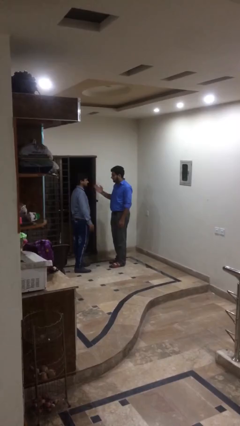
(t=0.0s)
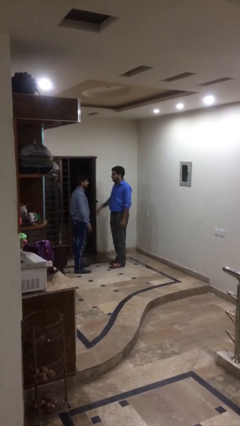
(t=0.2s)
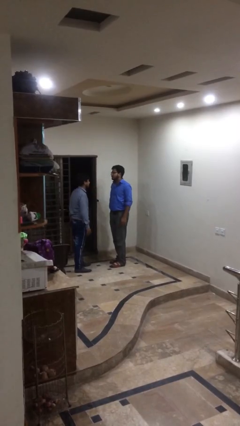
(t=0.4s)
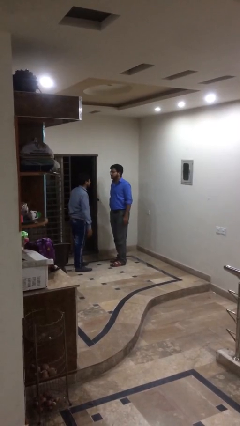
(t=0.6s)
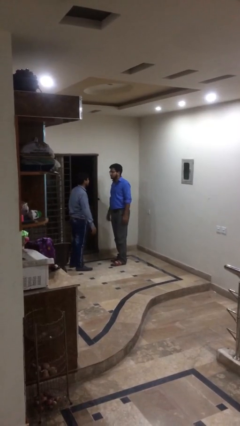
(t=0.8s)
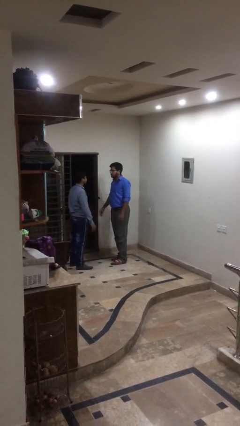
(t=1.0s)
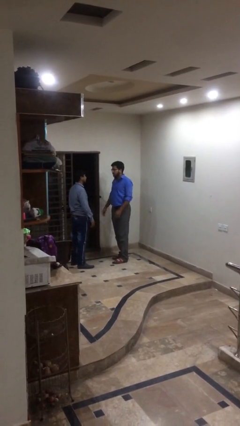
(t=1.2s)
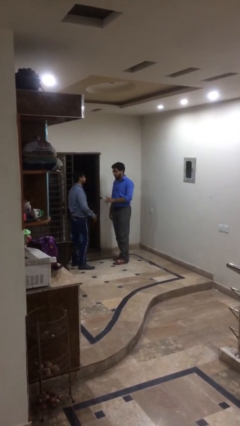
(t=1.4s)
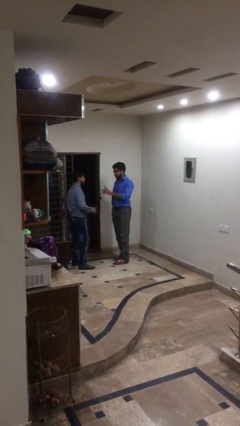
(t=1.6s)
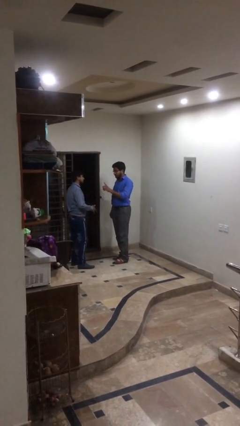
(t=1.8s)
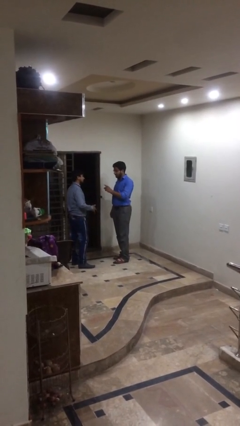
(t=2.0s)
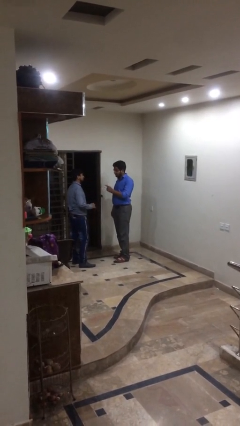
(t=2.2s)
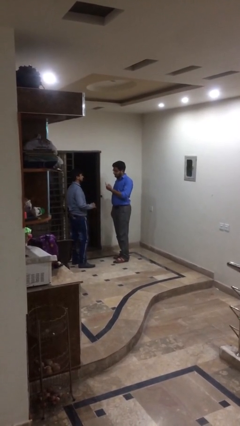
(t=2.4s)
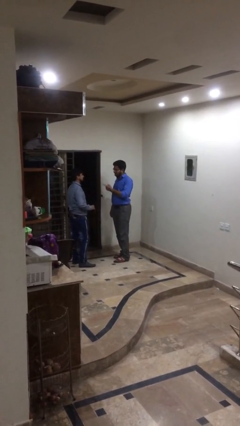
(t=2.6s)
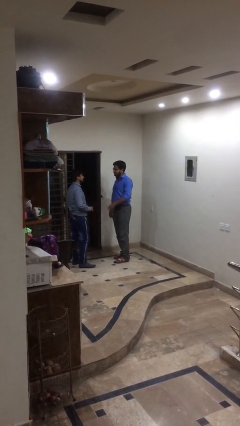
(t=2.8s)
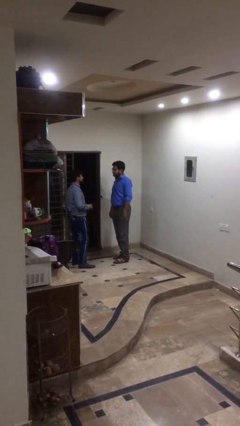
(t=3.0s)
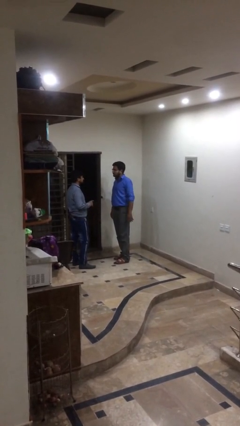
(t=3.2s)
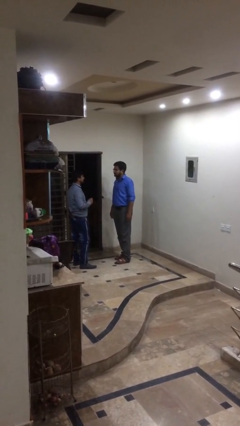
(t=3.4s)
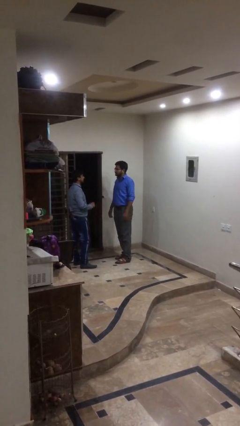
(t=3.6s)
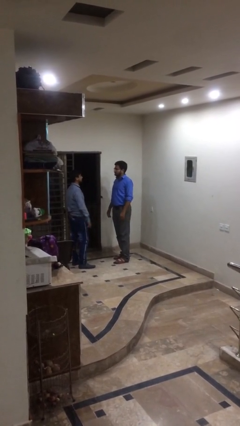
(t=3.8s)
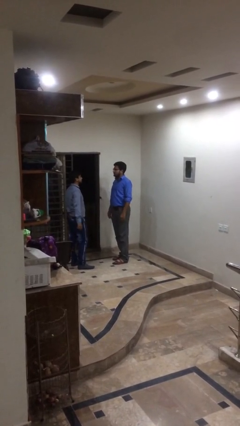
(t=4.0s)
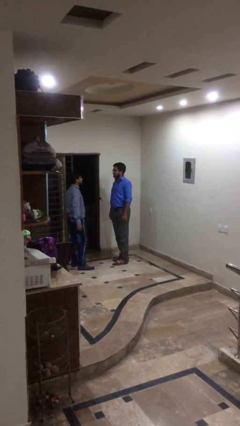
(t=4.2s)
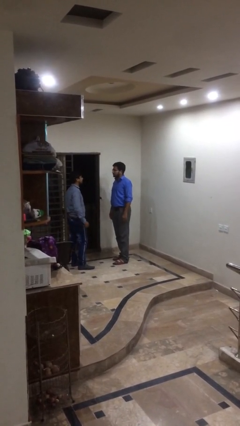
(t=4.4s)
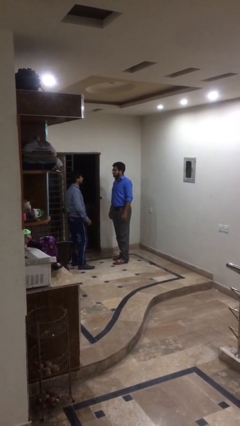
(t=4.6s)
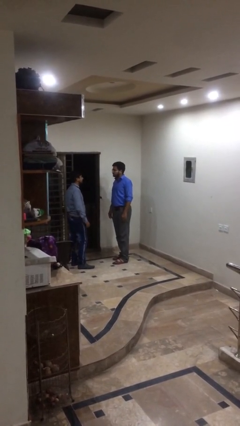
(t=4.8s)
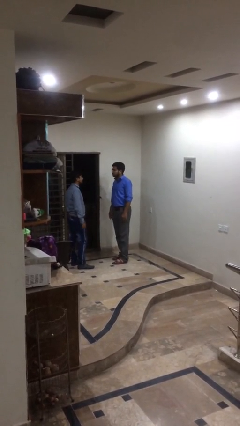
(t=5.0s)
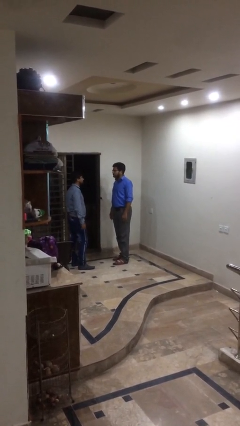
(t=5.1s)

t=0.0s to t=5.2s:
person talks to person

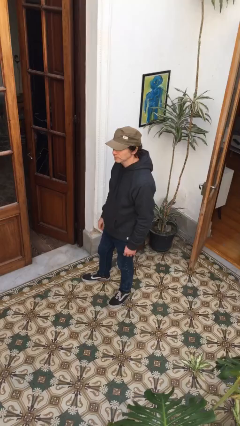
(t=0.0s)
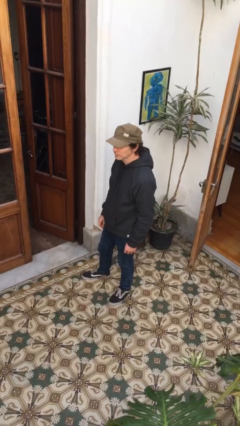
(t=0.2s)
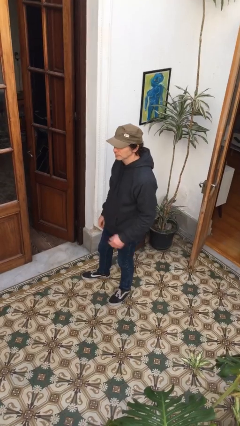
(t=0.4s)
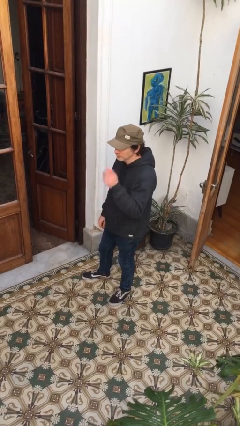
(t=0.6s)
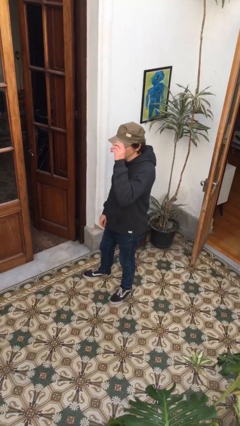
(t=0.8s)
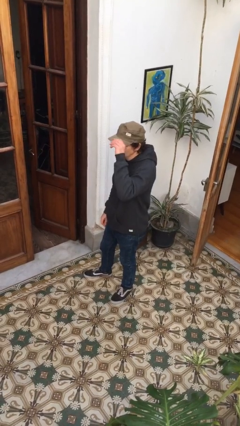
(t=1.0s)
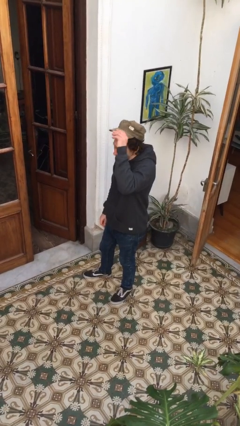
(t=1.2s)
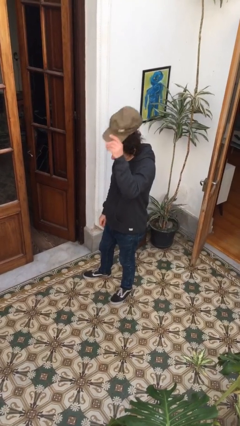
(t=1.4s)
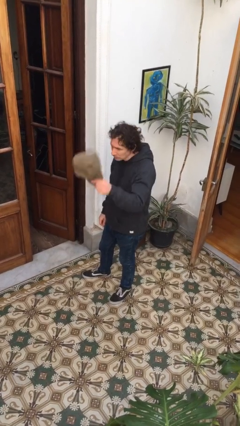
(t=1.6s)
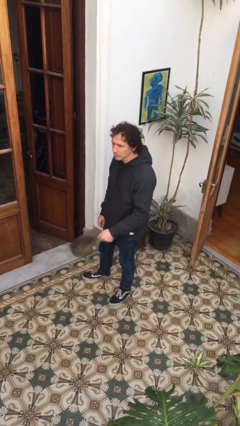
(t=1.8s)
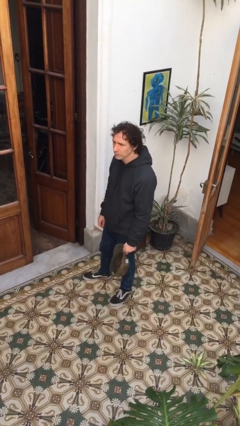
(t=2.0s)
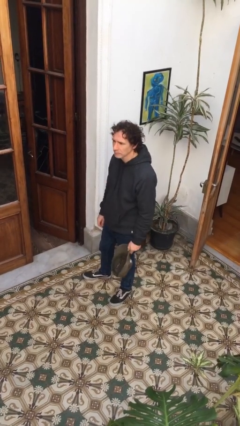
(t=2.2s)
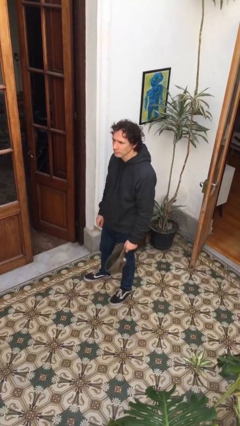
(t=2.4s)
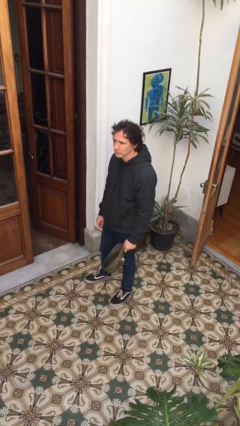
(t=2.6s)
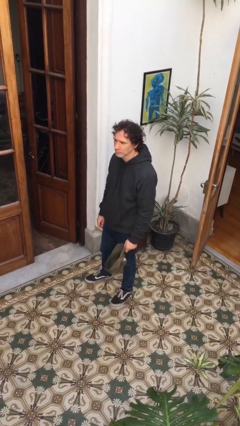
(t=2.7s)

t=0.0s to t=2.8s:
person takes off hat

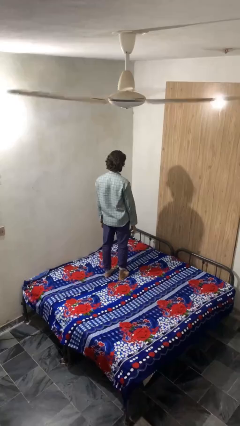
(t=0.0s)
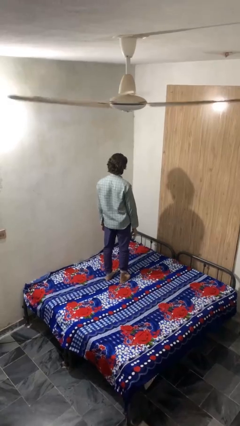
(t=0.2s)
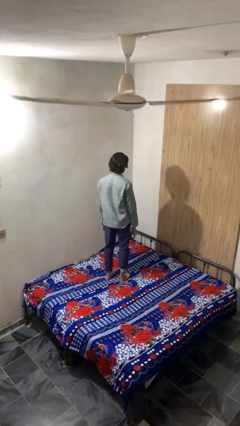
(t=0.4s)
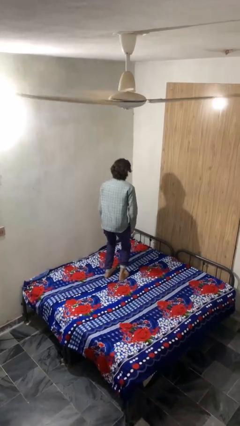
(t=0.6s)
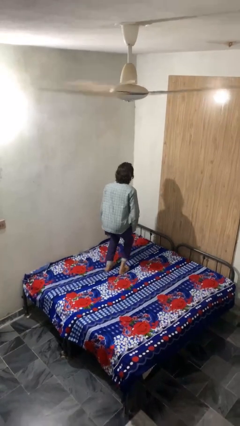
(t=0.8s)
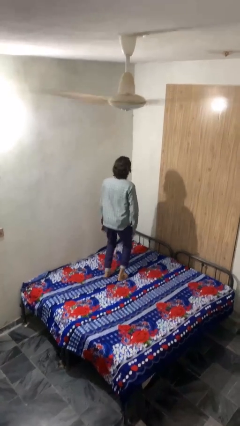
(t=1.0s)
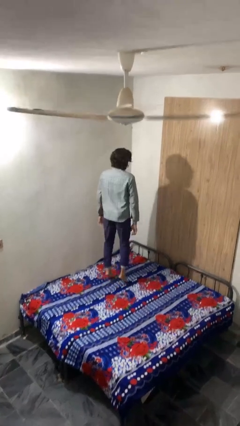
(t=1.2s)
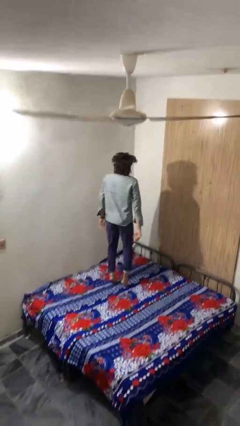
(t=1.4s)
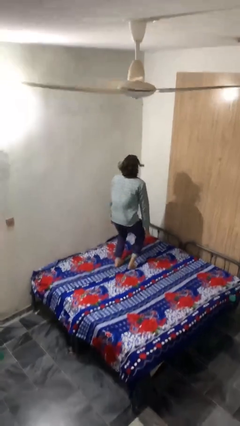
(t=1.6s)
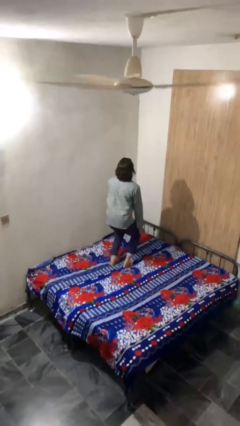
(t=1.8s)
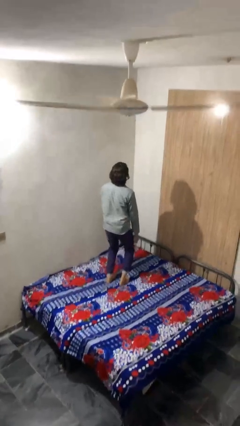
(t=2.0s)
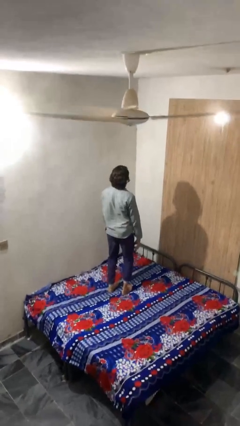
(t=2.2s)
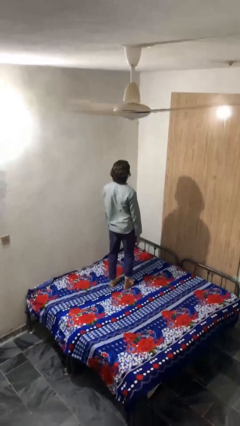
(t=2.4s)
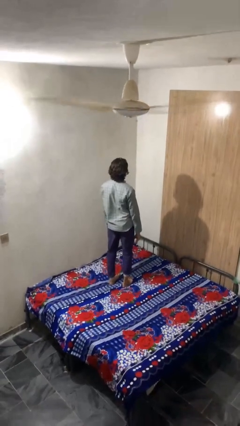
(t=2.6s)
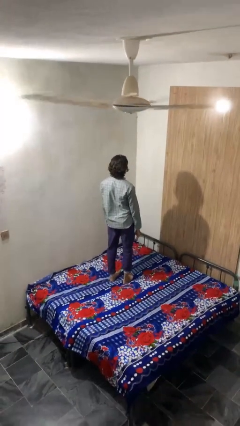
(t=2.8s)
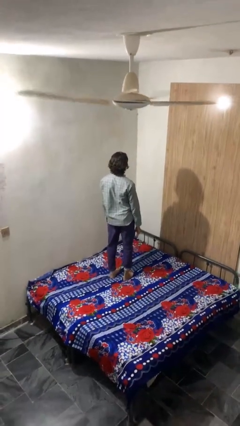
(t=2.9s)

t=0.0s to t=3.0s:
person jumps on bed

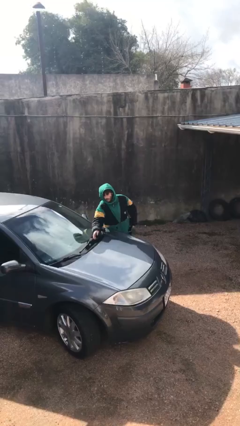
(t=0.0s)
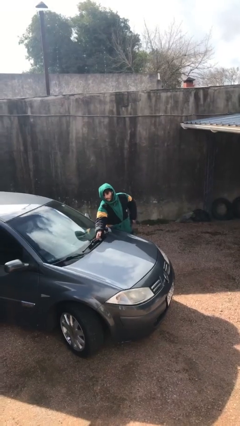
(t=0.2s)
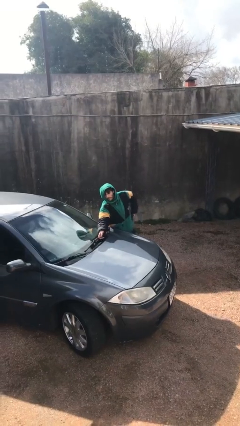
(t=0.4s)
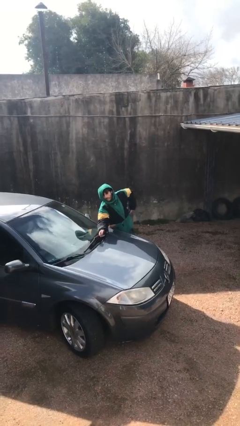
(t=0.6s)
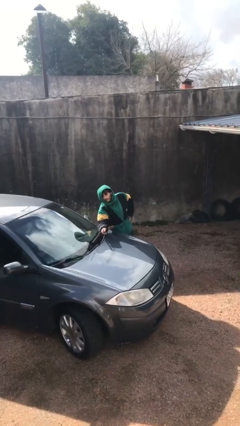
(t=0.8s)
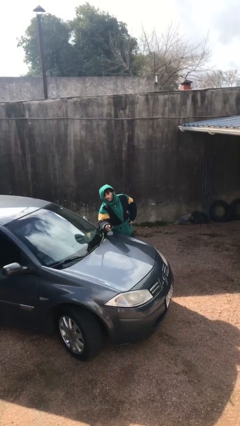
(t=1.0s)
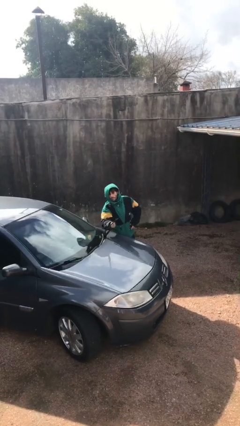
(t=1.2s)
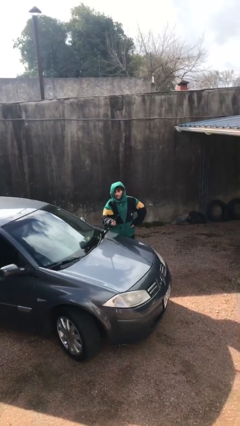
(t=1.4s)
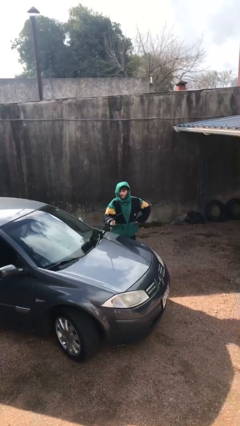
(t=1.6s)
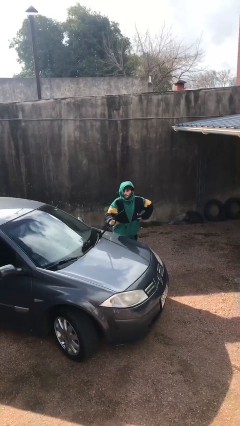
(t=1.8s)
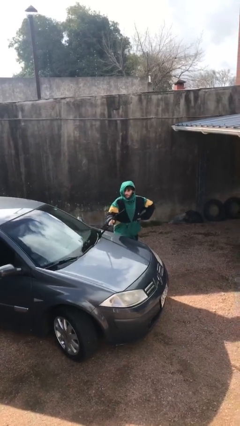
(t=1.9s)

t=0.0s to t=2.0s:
person flips up car wipers

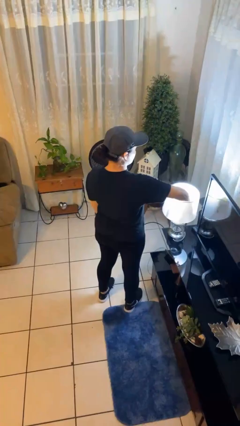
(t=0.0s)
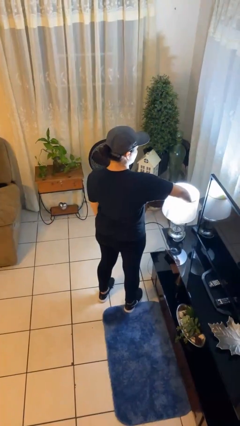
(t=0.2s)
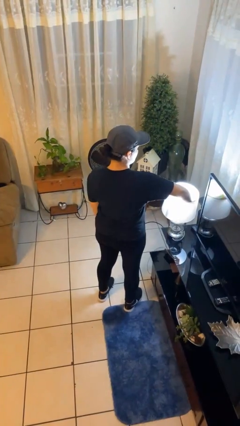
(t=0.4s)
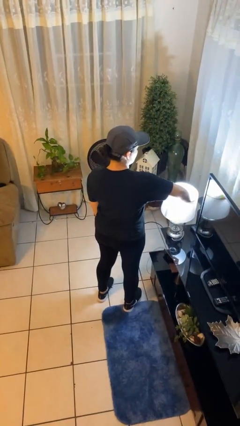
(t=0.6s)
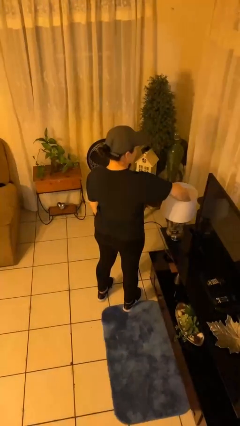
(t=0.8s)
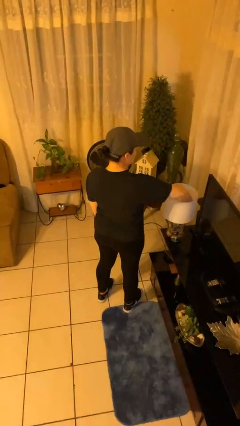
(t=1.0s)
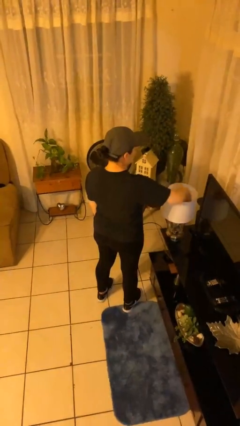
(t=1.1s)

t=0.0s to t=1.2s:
person turns off lamp

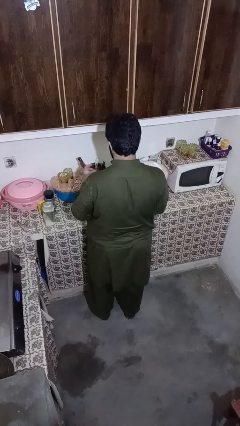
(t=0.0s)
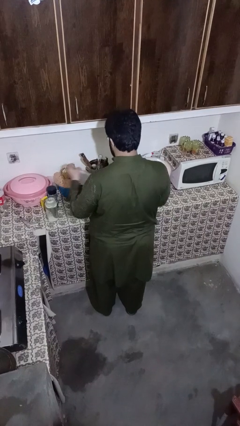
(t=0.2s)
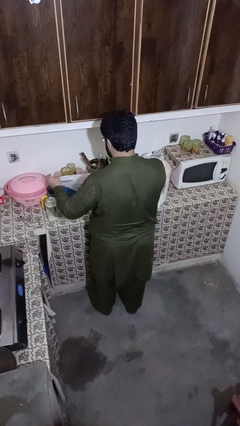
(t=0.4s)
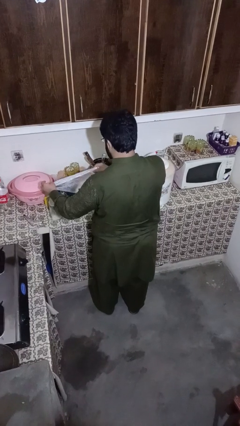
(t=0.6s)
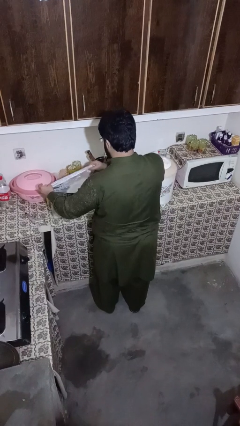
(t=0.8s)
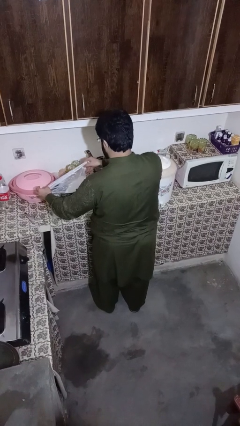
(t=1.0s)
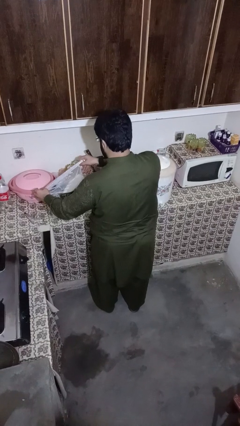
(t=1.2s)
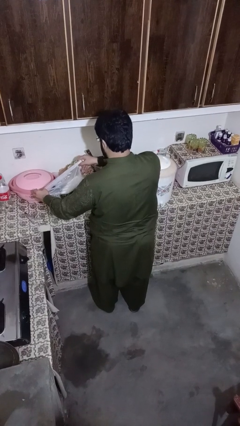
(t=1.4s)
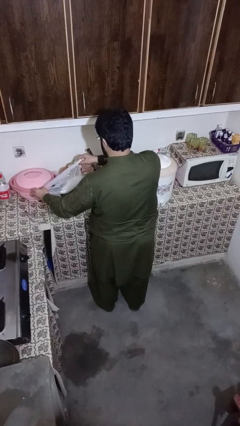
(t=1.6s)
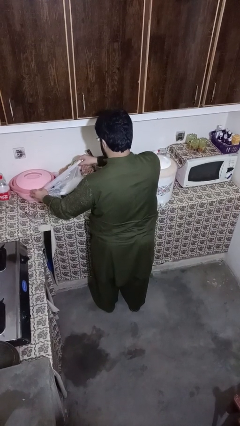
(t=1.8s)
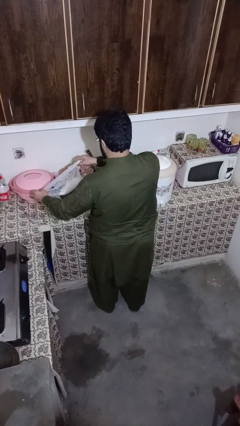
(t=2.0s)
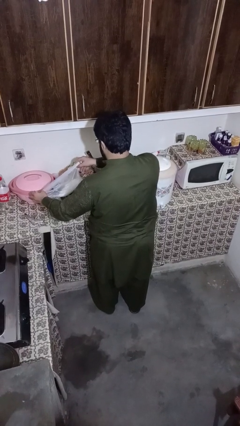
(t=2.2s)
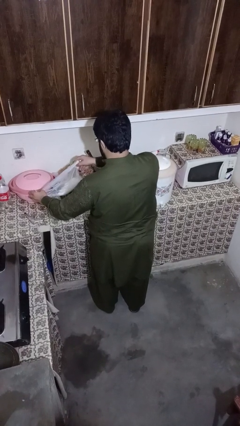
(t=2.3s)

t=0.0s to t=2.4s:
person pours into bowl

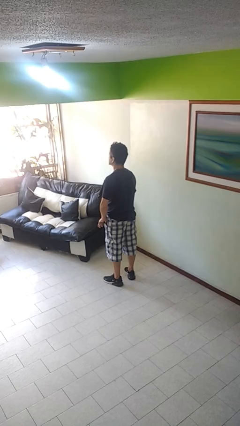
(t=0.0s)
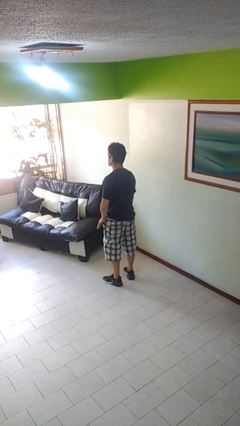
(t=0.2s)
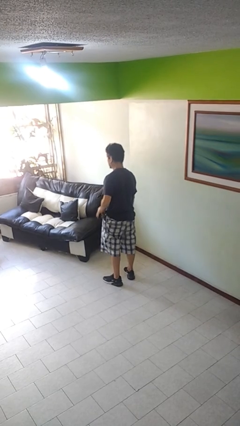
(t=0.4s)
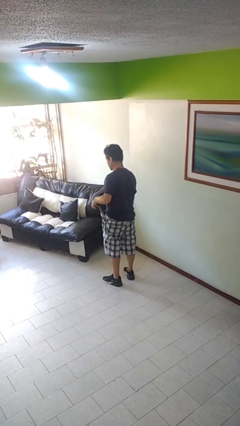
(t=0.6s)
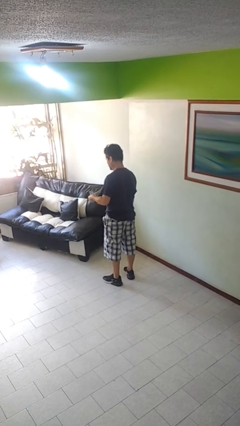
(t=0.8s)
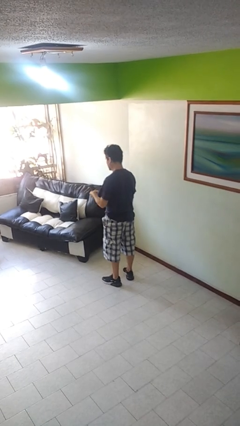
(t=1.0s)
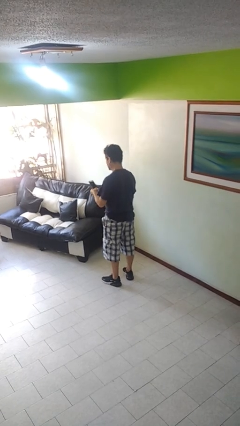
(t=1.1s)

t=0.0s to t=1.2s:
person takes phone from pocket
